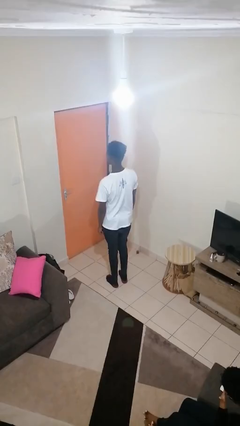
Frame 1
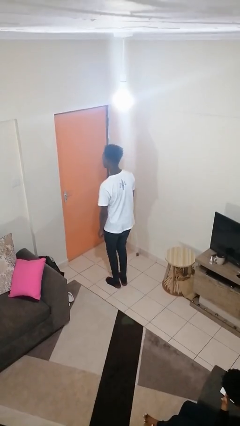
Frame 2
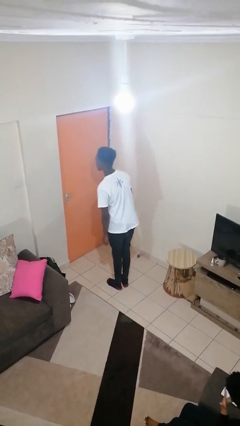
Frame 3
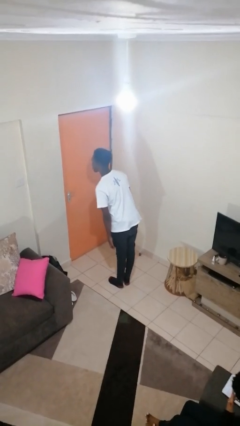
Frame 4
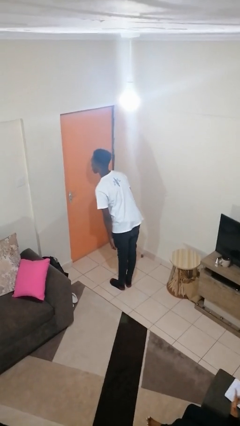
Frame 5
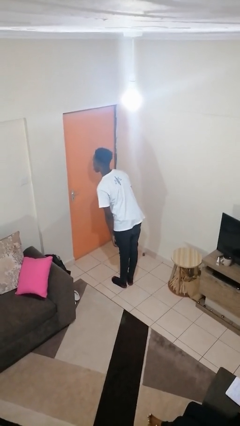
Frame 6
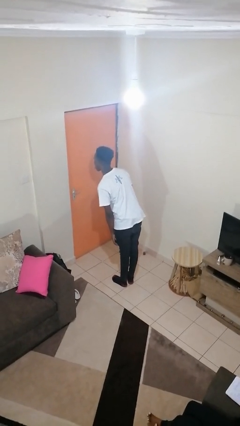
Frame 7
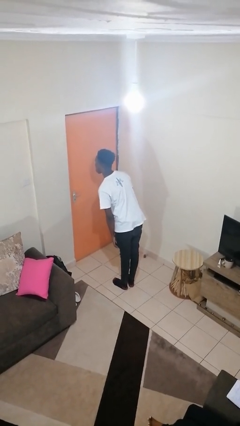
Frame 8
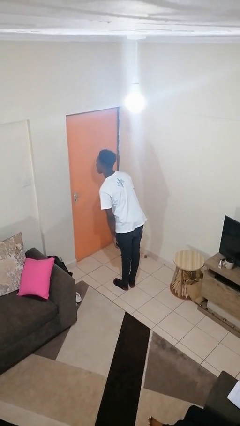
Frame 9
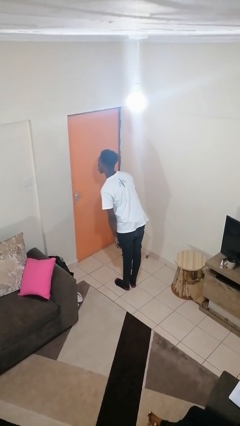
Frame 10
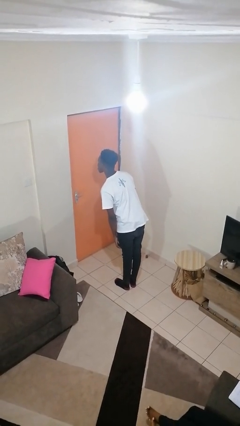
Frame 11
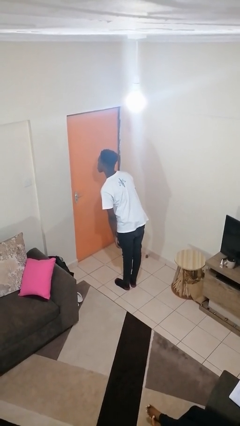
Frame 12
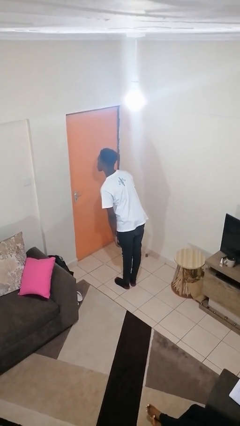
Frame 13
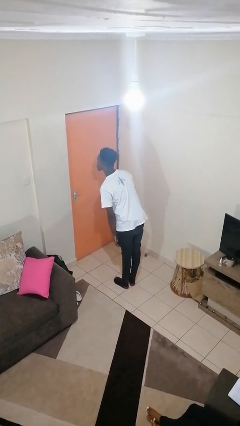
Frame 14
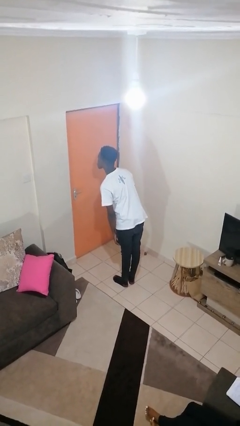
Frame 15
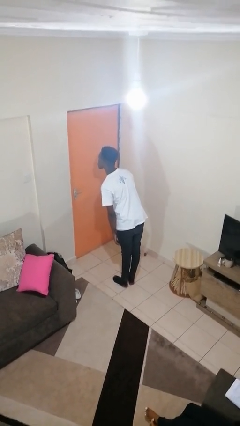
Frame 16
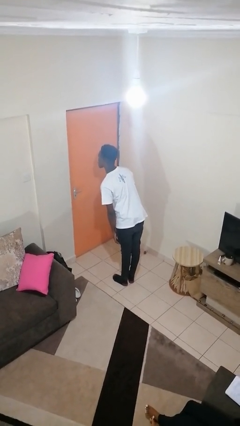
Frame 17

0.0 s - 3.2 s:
person sticks out tongue

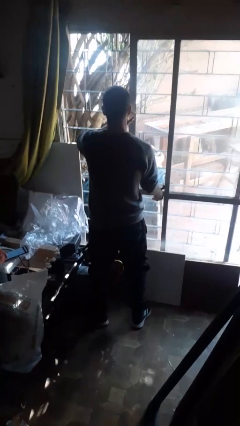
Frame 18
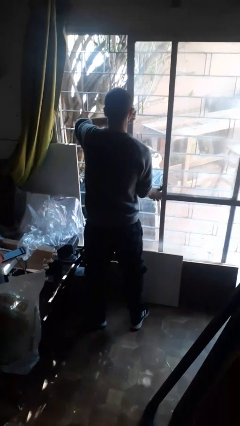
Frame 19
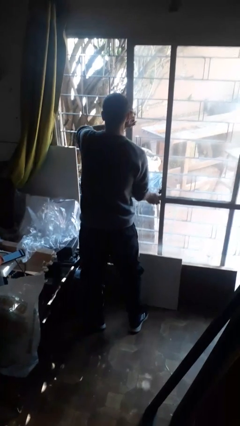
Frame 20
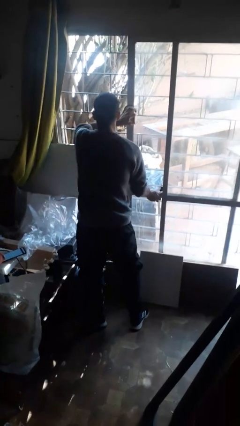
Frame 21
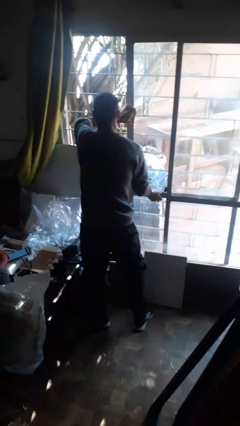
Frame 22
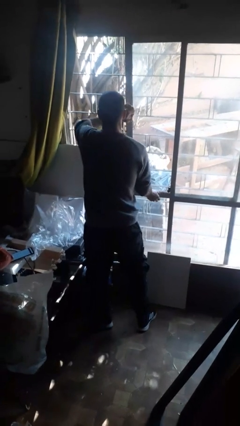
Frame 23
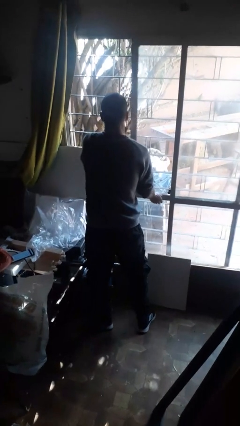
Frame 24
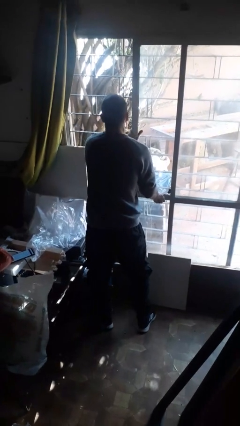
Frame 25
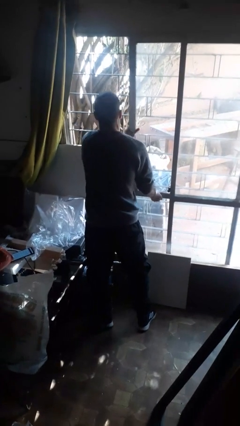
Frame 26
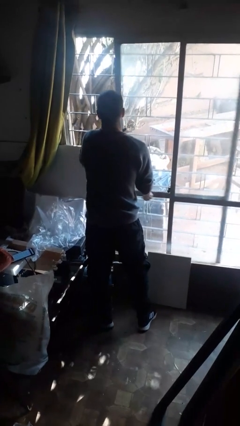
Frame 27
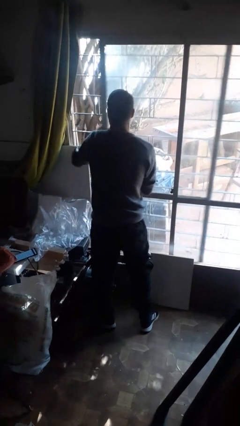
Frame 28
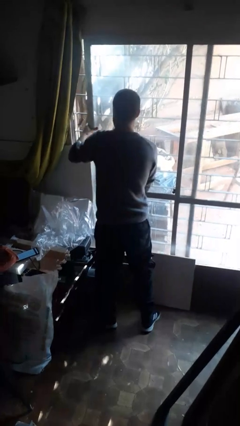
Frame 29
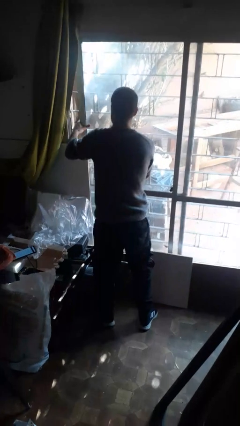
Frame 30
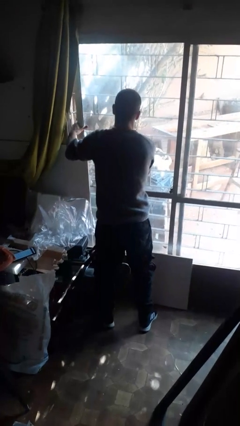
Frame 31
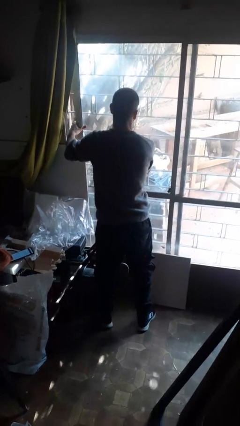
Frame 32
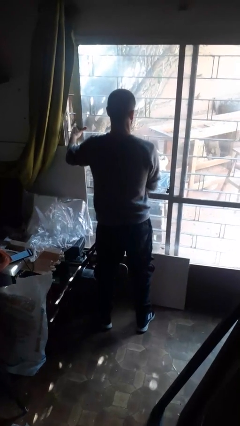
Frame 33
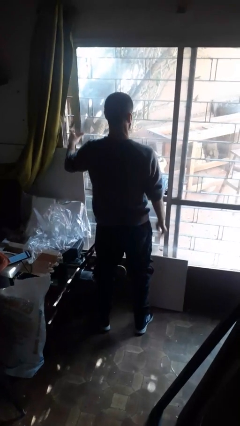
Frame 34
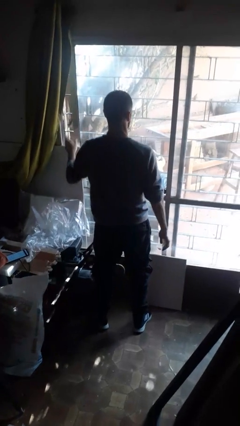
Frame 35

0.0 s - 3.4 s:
person closes sliding door

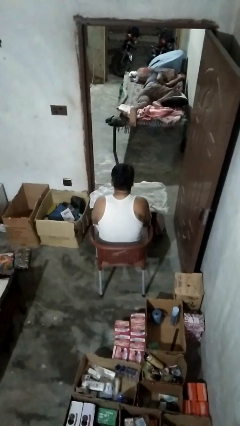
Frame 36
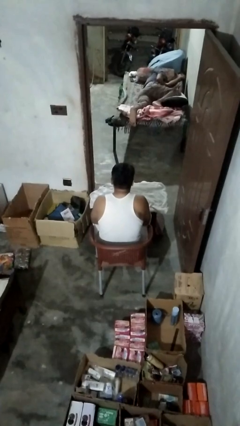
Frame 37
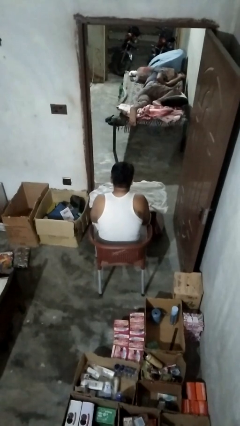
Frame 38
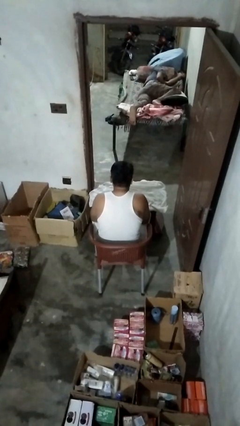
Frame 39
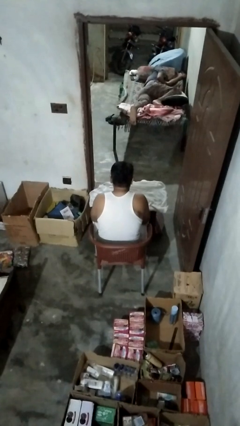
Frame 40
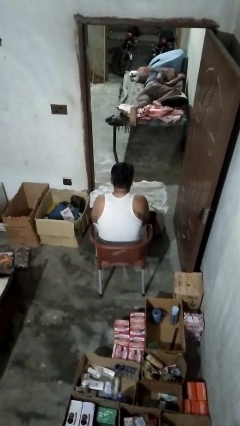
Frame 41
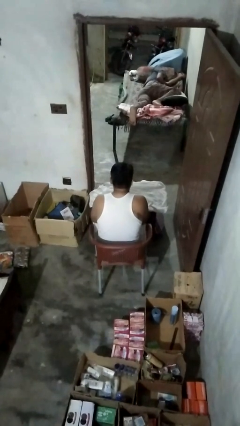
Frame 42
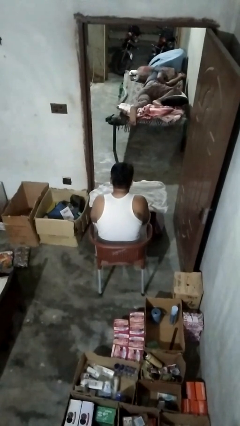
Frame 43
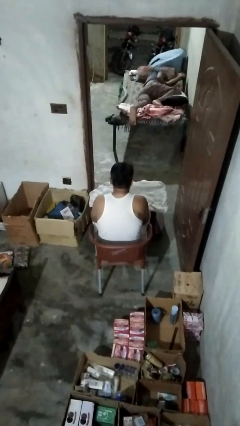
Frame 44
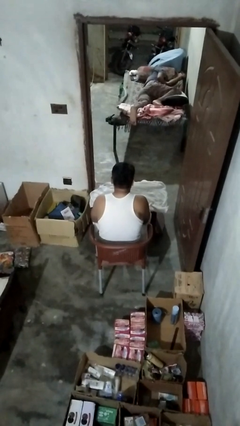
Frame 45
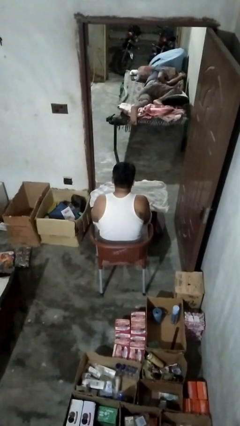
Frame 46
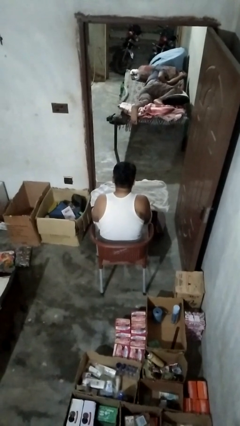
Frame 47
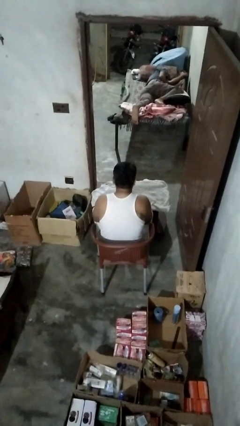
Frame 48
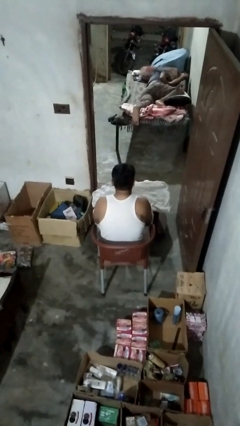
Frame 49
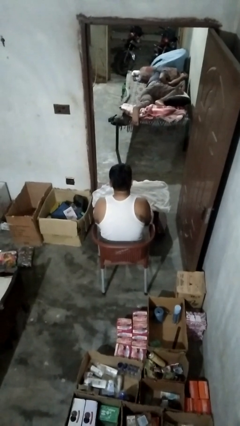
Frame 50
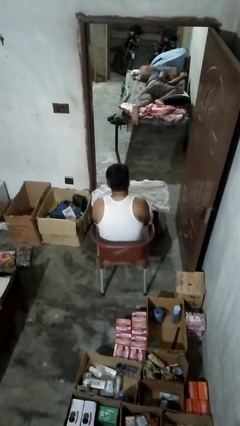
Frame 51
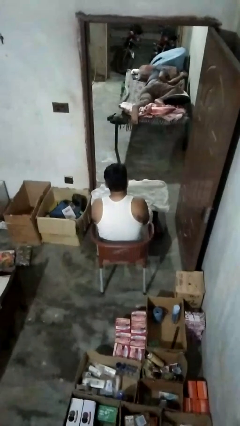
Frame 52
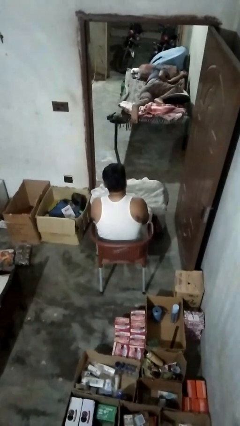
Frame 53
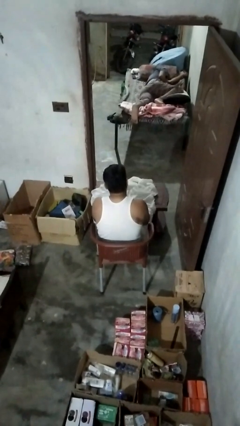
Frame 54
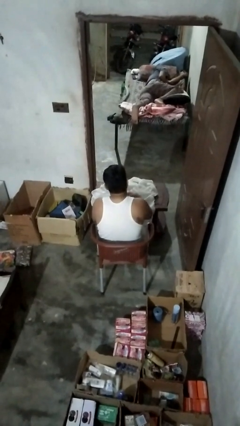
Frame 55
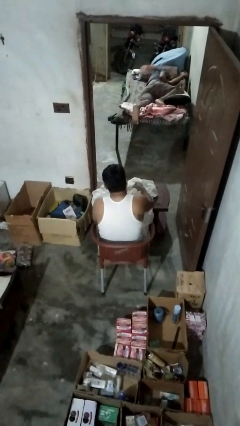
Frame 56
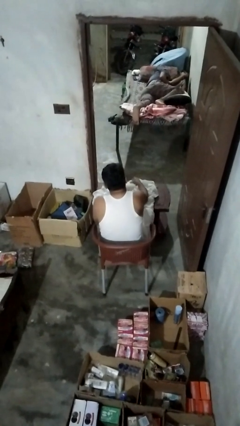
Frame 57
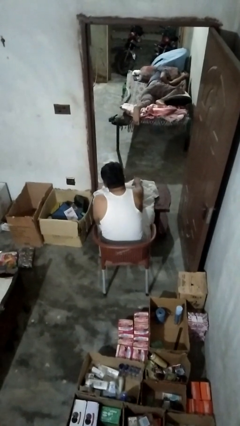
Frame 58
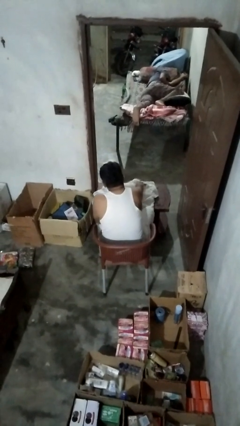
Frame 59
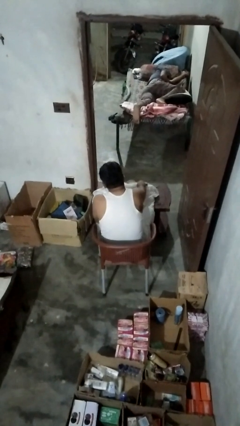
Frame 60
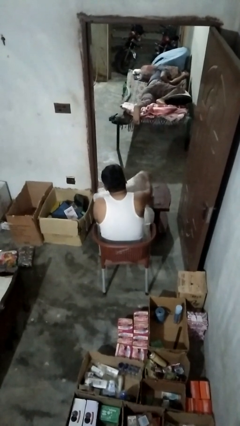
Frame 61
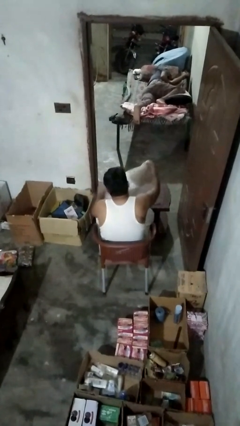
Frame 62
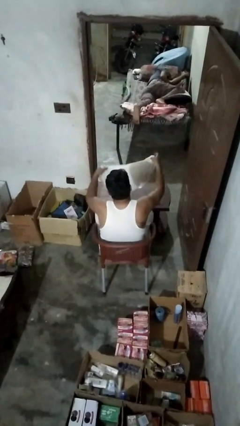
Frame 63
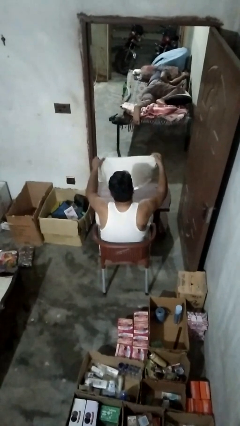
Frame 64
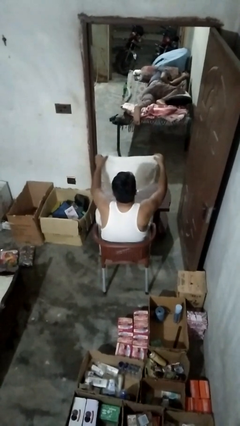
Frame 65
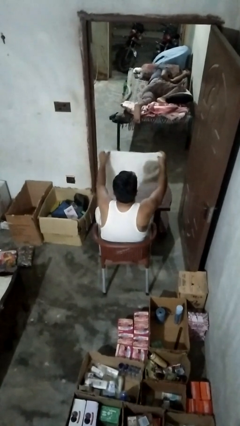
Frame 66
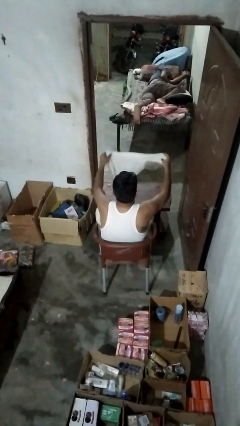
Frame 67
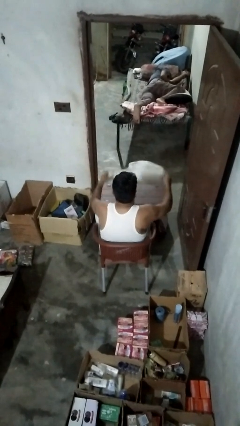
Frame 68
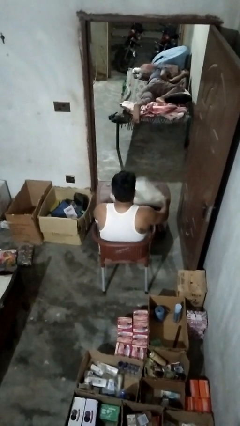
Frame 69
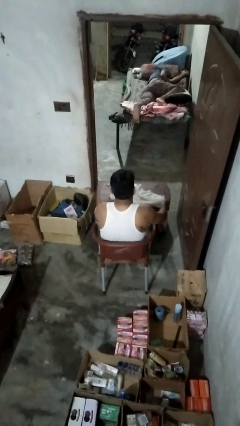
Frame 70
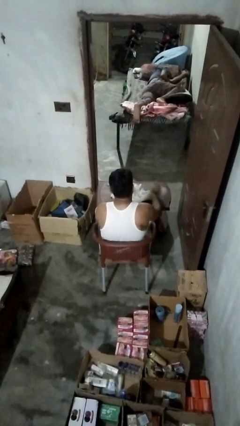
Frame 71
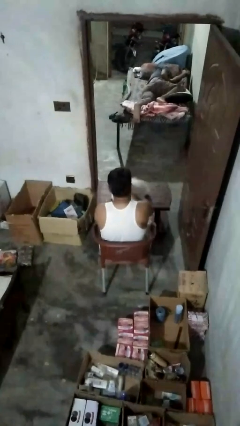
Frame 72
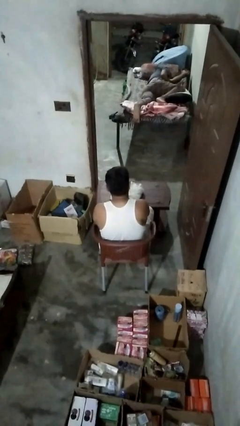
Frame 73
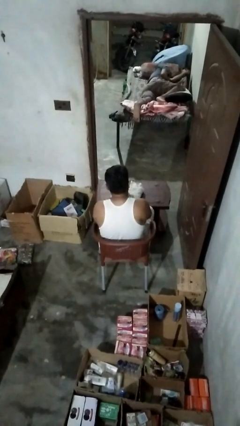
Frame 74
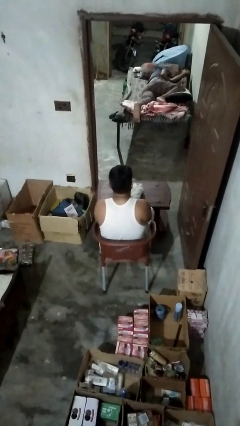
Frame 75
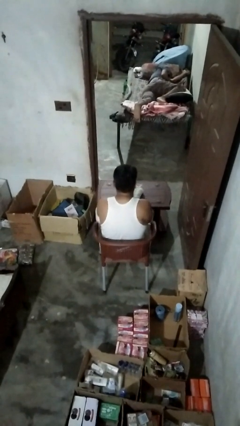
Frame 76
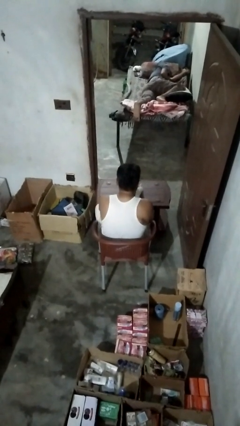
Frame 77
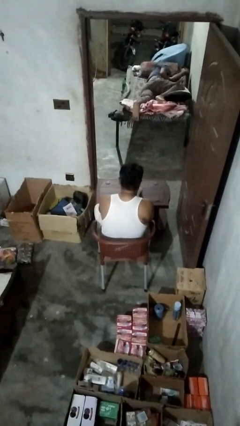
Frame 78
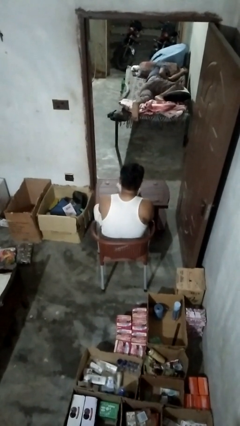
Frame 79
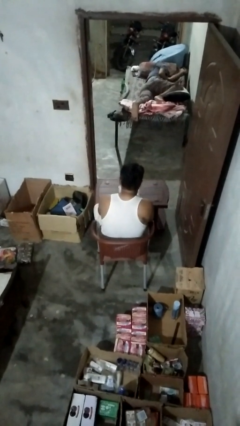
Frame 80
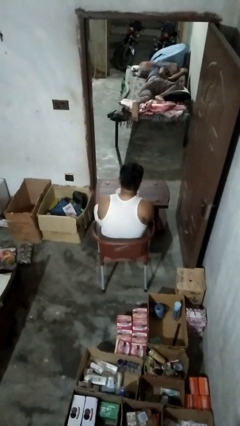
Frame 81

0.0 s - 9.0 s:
person folds tablecloth

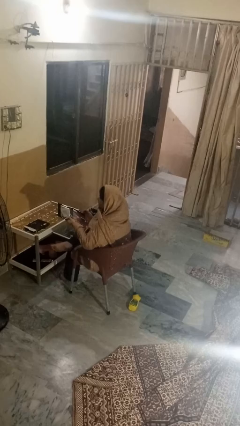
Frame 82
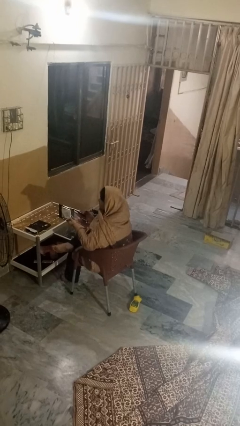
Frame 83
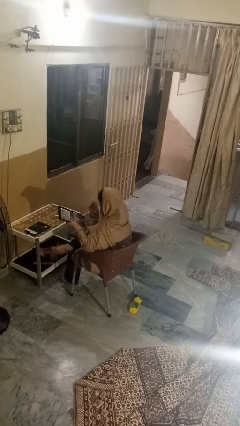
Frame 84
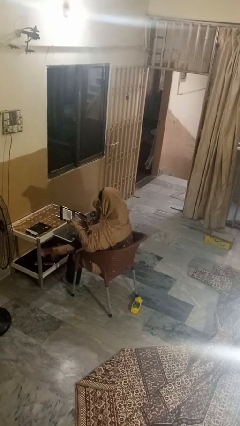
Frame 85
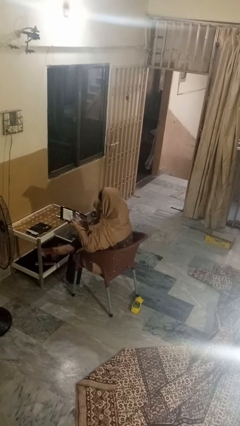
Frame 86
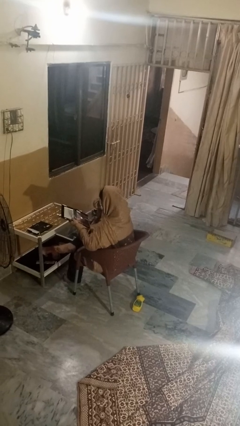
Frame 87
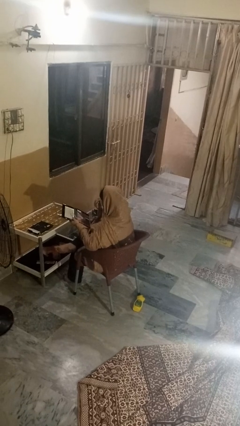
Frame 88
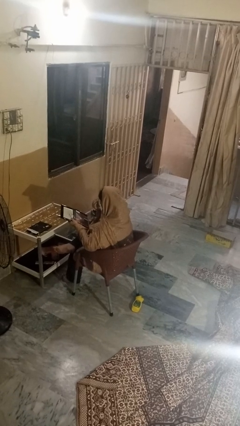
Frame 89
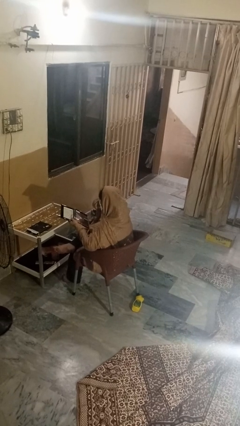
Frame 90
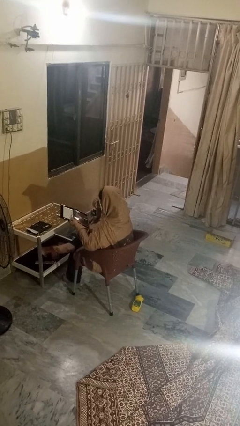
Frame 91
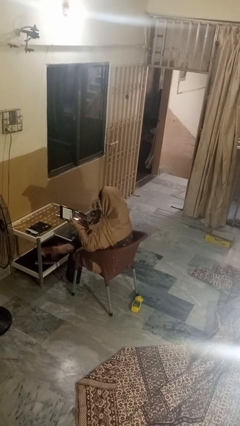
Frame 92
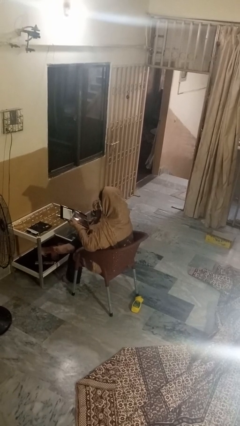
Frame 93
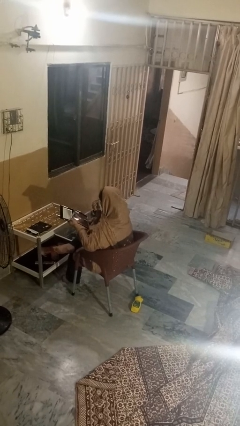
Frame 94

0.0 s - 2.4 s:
person applies eye makeup
